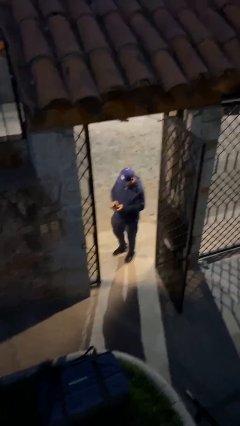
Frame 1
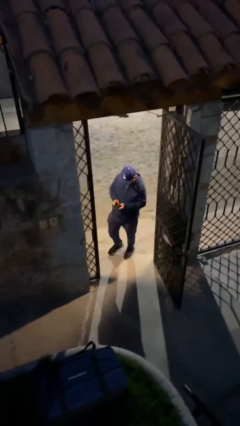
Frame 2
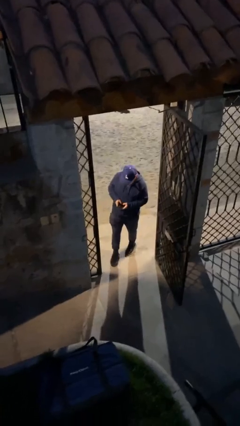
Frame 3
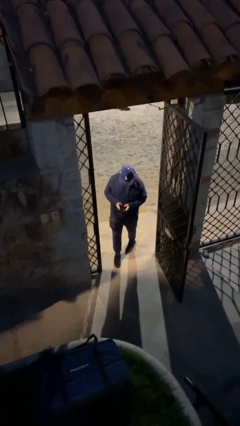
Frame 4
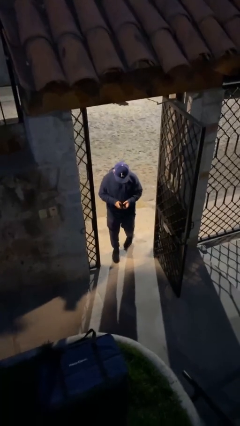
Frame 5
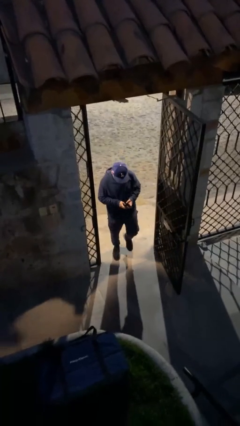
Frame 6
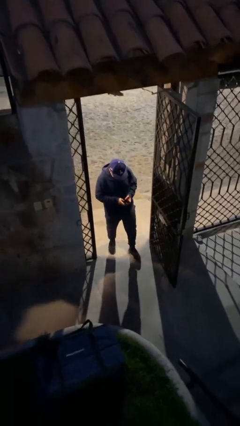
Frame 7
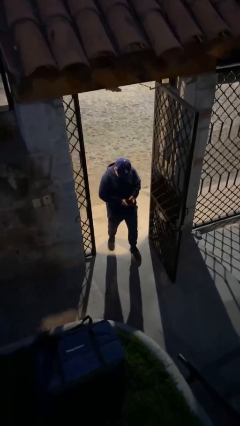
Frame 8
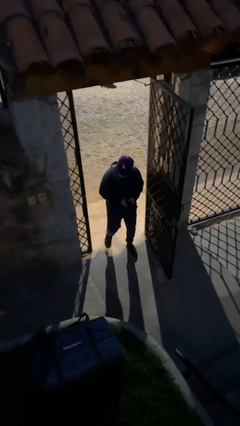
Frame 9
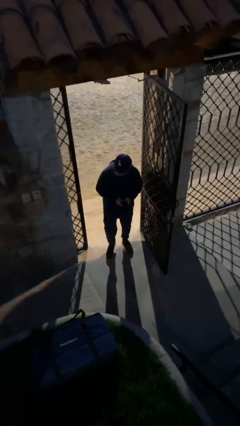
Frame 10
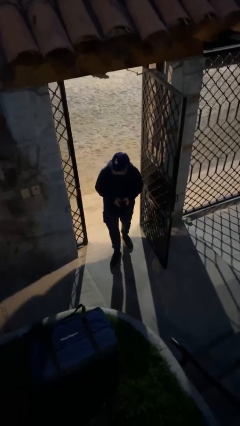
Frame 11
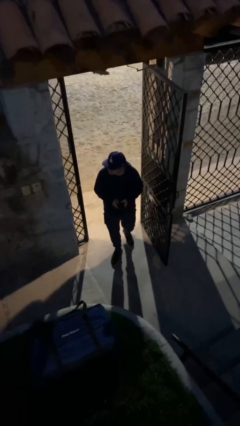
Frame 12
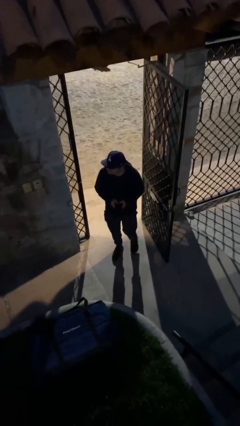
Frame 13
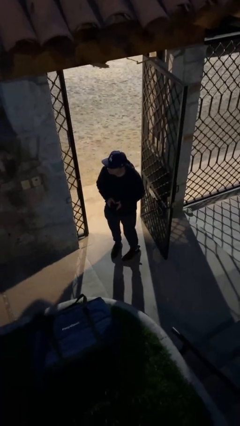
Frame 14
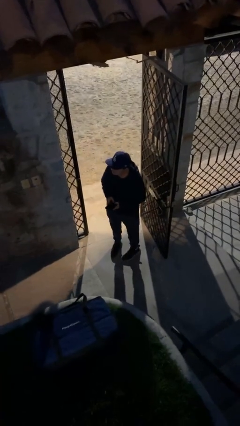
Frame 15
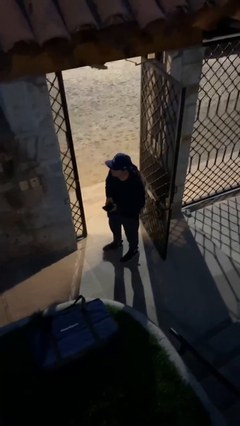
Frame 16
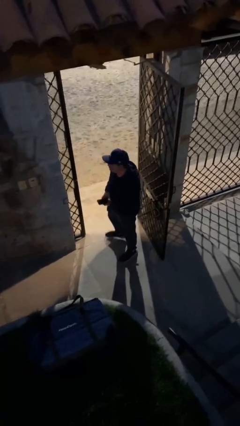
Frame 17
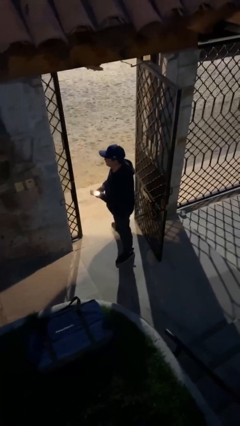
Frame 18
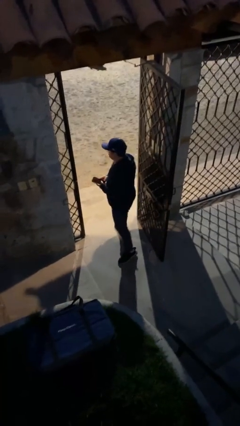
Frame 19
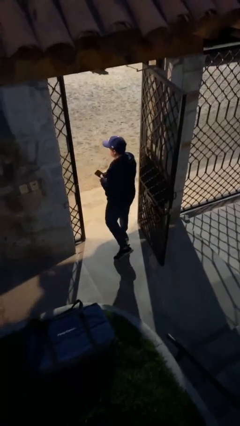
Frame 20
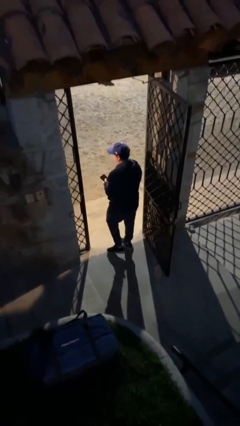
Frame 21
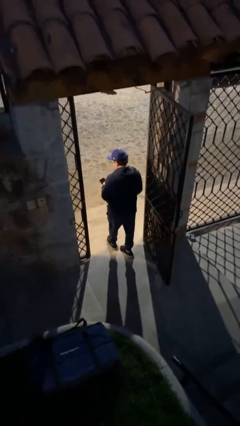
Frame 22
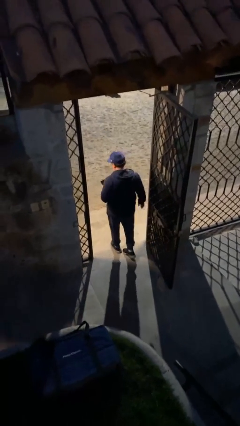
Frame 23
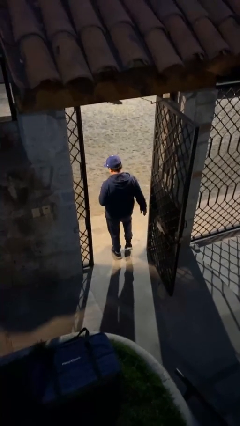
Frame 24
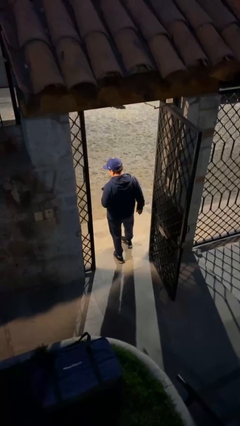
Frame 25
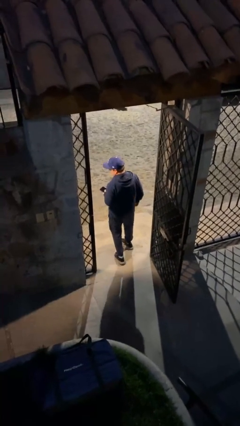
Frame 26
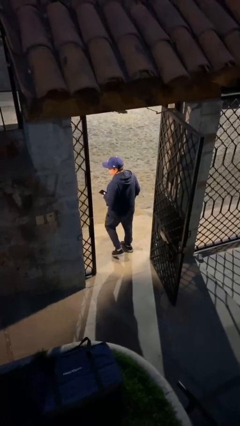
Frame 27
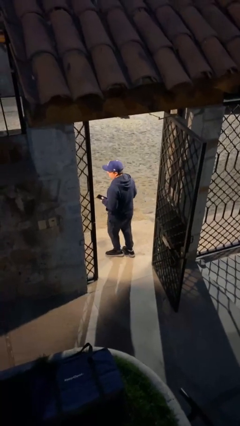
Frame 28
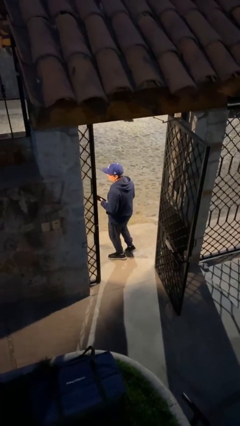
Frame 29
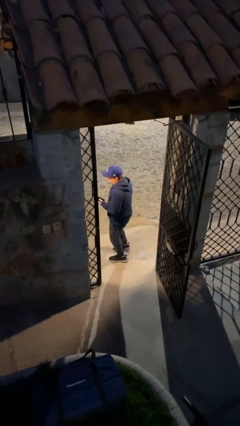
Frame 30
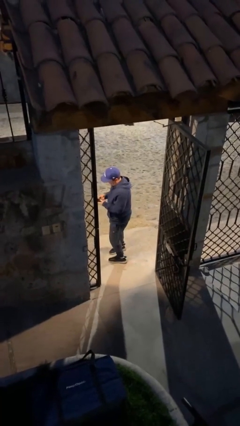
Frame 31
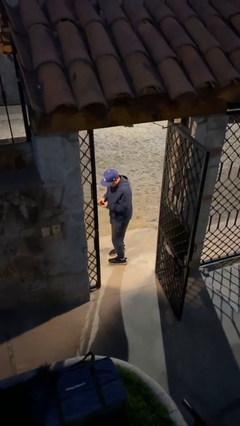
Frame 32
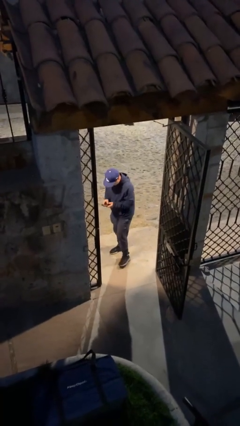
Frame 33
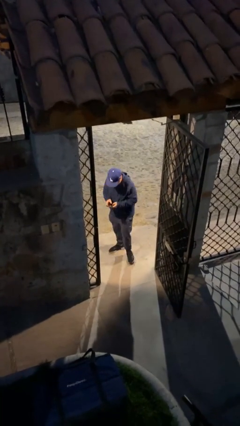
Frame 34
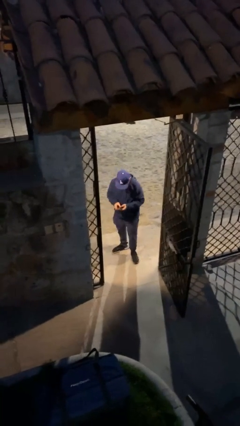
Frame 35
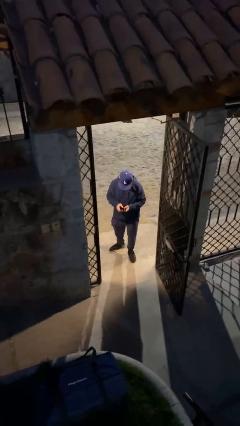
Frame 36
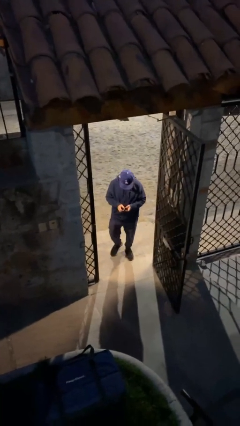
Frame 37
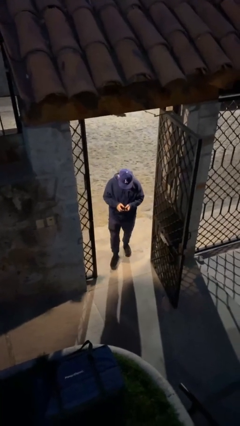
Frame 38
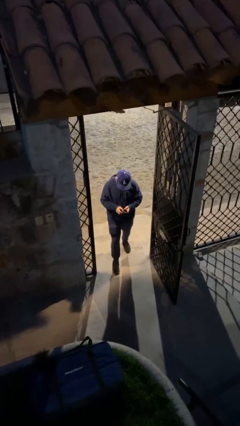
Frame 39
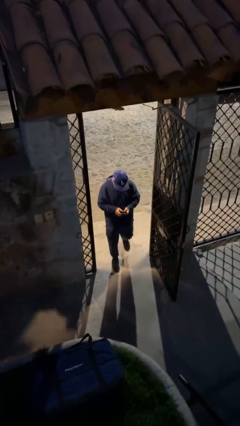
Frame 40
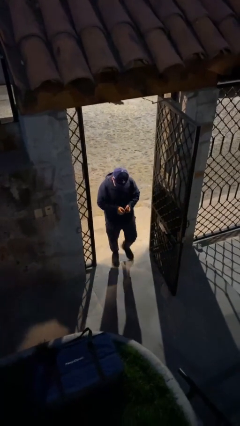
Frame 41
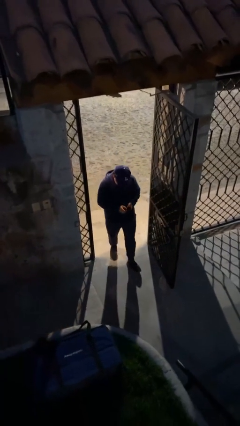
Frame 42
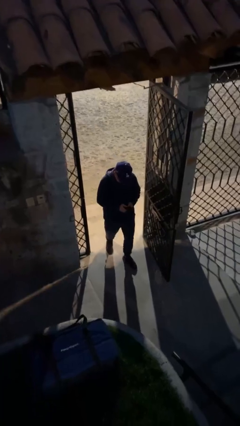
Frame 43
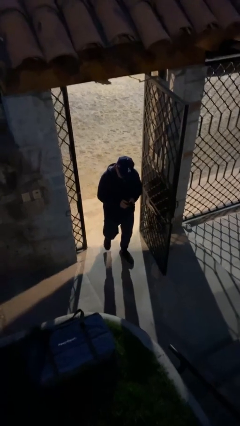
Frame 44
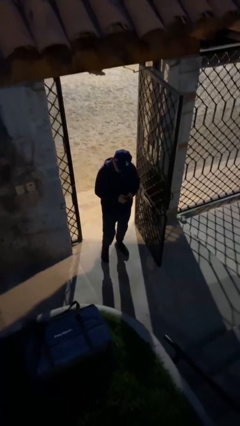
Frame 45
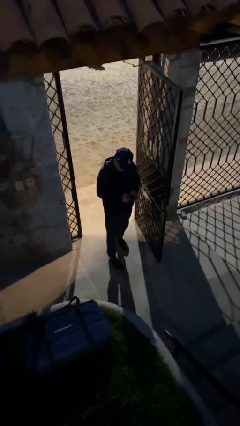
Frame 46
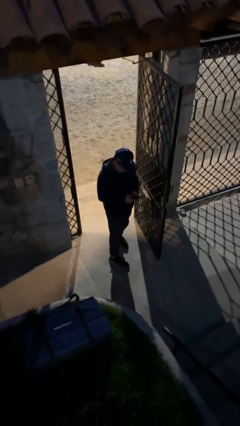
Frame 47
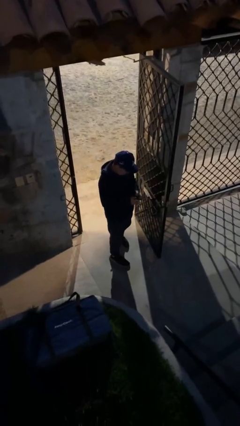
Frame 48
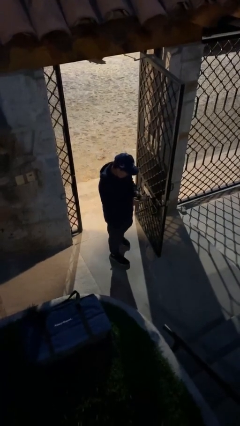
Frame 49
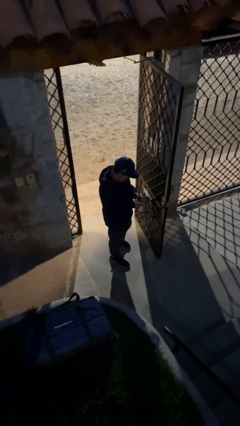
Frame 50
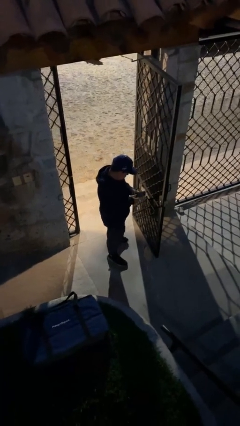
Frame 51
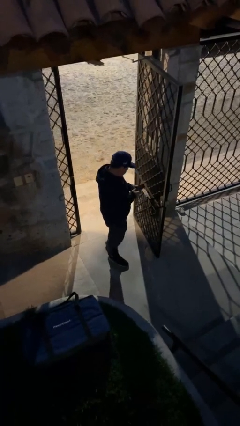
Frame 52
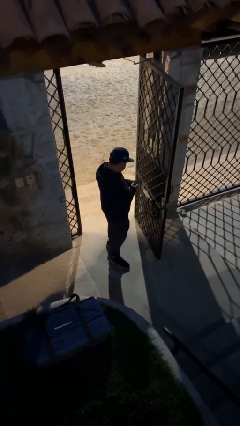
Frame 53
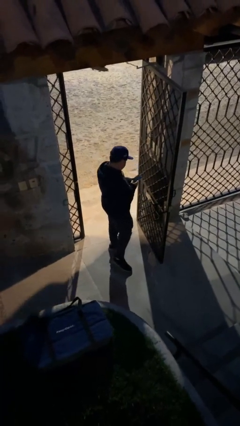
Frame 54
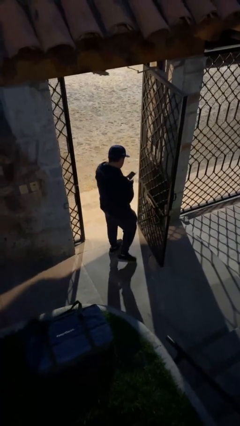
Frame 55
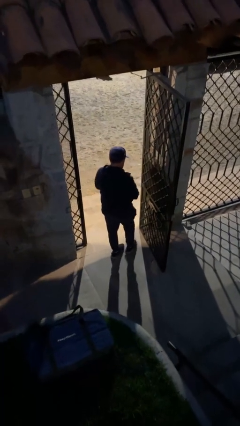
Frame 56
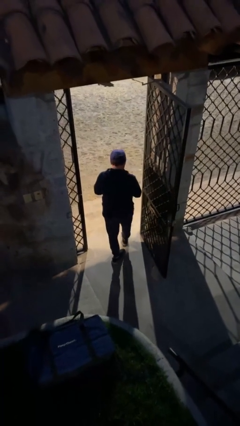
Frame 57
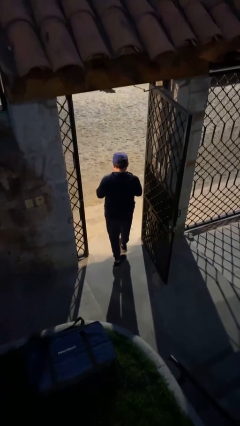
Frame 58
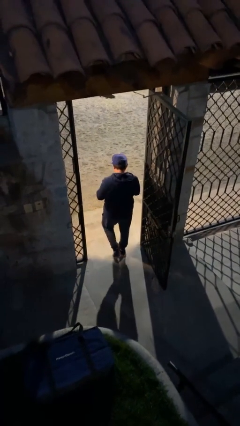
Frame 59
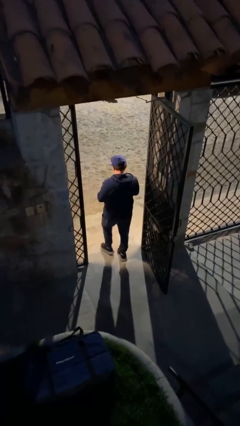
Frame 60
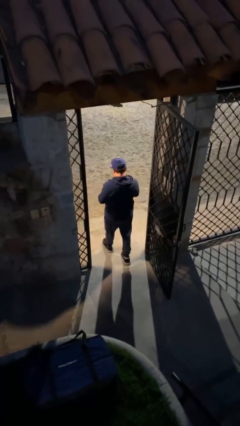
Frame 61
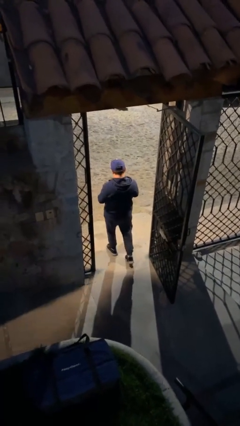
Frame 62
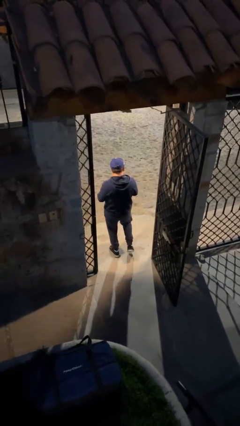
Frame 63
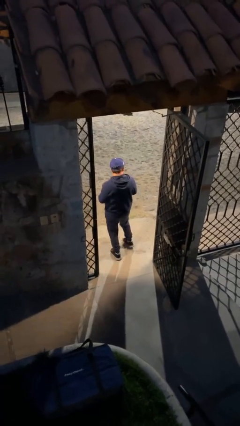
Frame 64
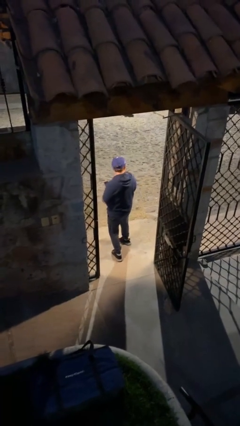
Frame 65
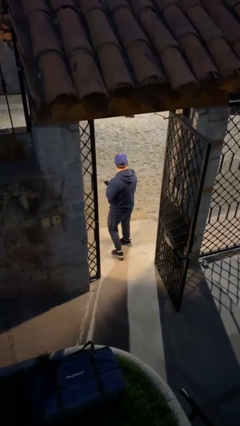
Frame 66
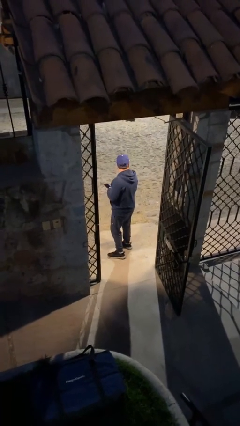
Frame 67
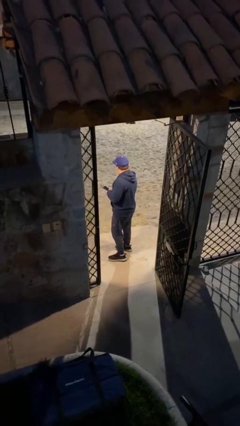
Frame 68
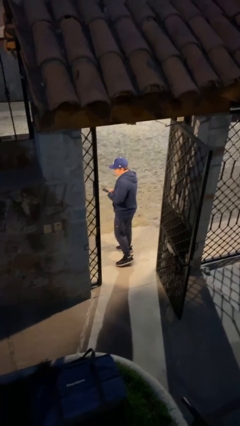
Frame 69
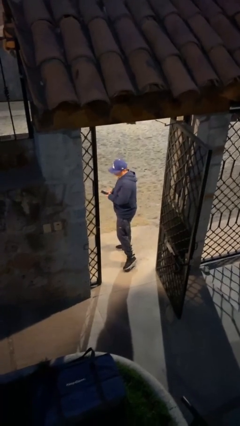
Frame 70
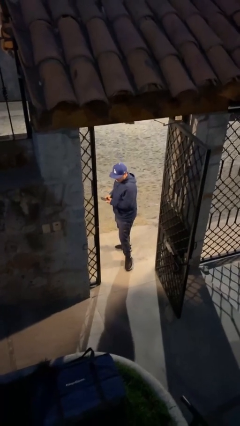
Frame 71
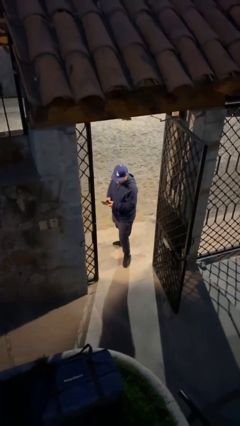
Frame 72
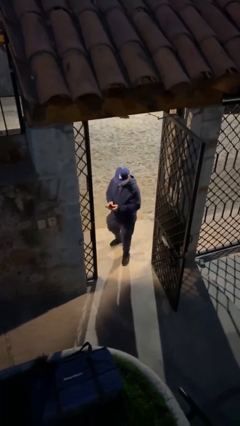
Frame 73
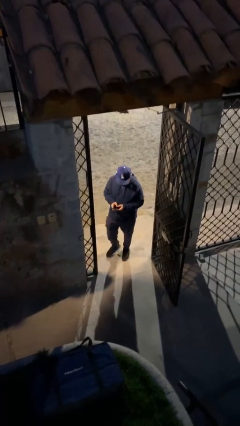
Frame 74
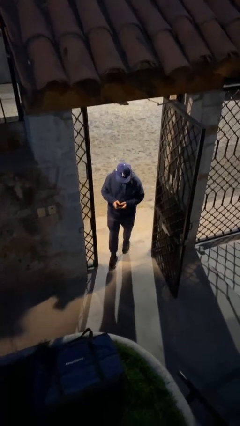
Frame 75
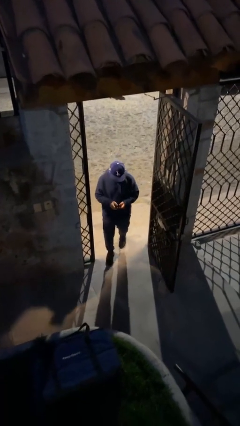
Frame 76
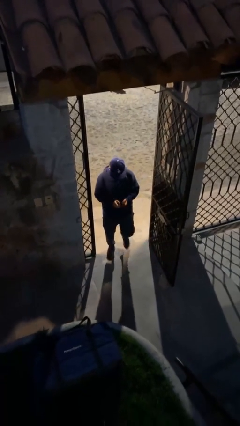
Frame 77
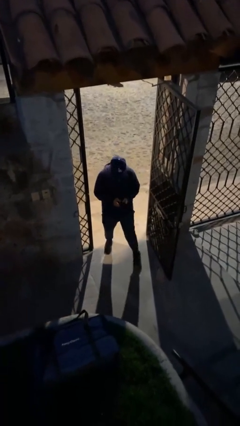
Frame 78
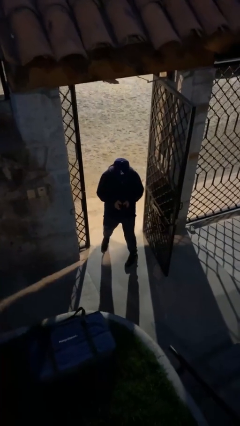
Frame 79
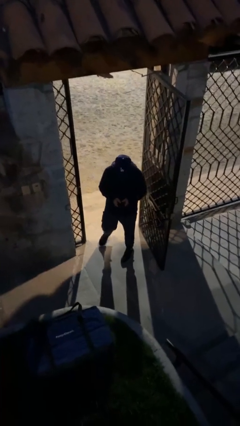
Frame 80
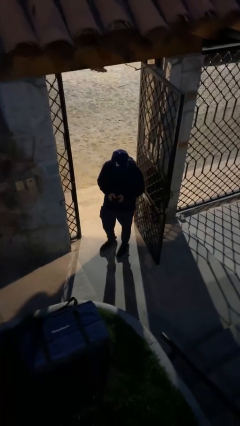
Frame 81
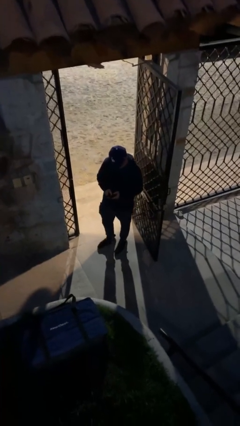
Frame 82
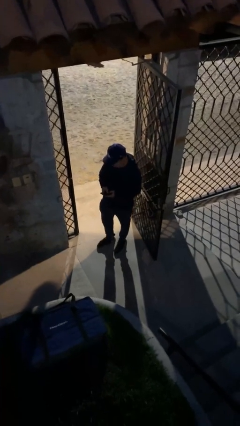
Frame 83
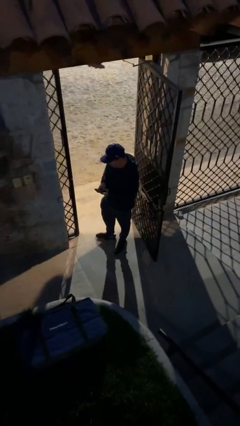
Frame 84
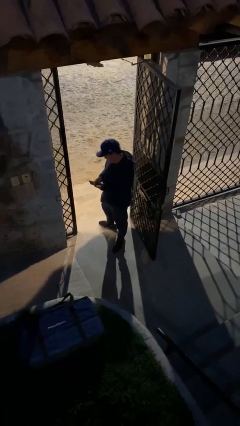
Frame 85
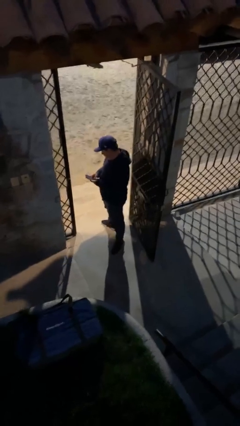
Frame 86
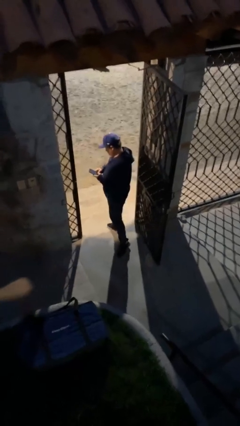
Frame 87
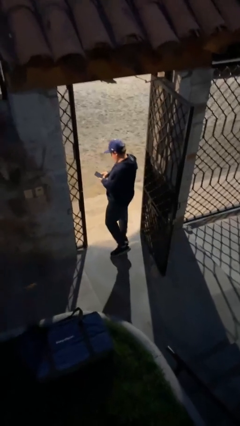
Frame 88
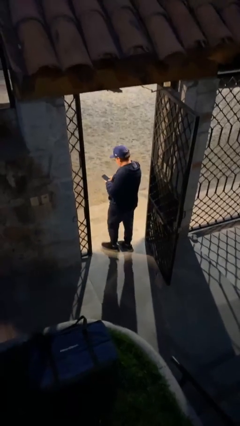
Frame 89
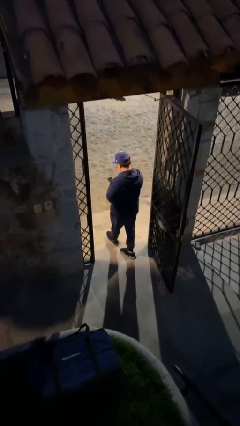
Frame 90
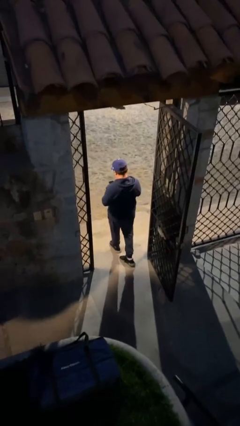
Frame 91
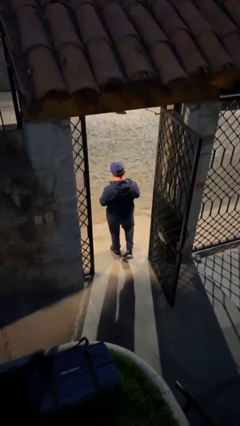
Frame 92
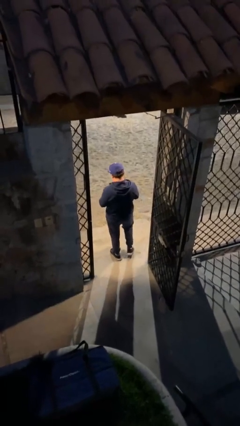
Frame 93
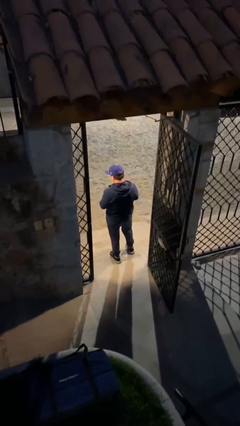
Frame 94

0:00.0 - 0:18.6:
person texts on phone
